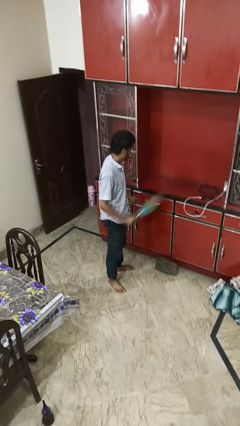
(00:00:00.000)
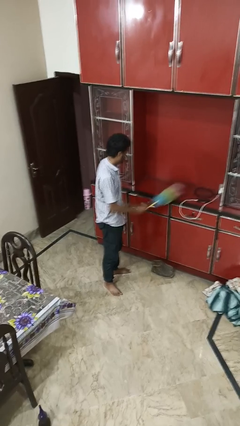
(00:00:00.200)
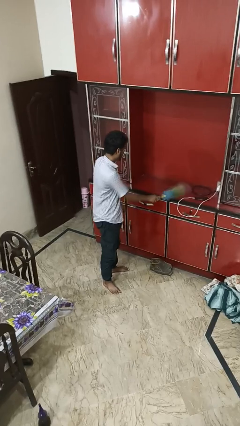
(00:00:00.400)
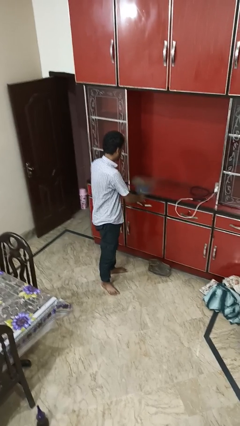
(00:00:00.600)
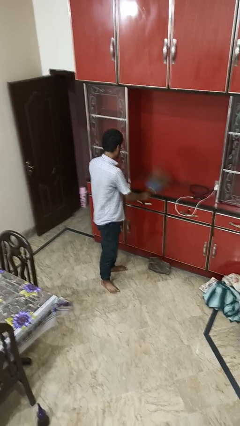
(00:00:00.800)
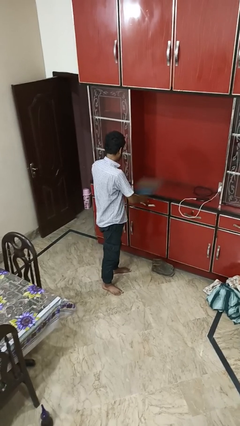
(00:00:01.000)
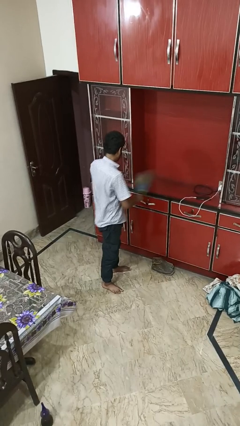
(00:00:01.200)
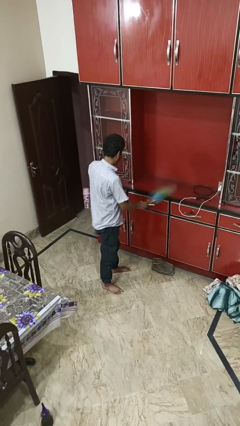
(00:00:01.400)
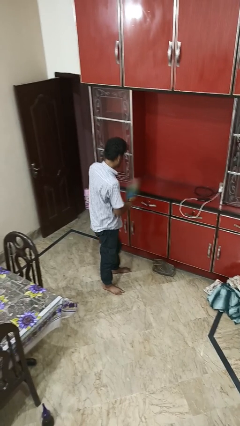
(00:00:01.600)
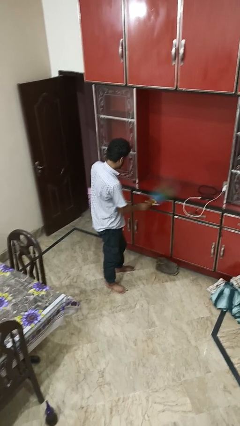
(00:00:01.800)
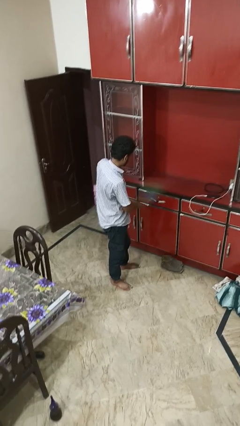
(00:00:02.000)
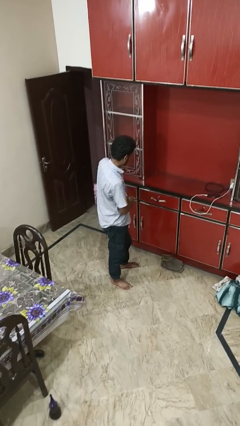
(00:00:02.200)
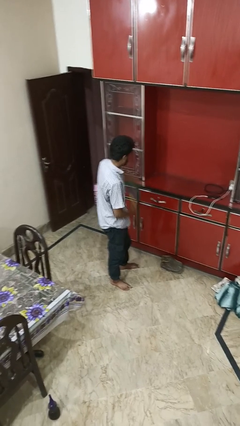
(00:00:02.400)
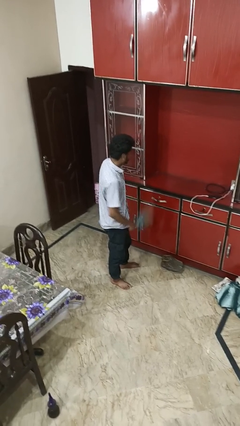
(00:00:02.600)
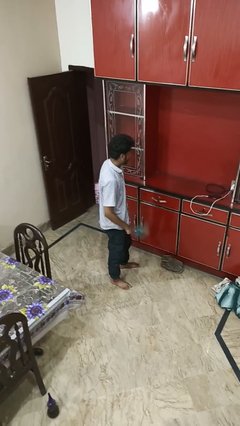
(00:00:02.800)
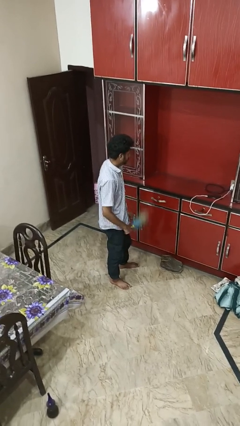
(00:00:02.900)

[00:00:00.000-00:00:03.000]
person dusts furniture

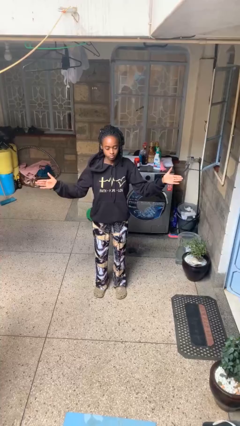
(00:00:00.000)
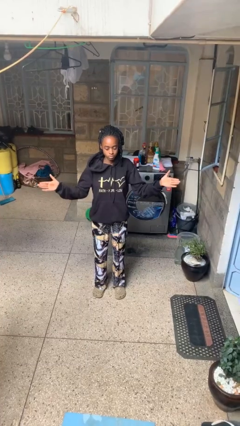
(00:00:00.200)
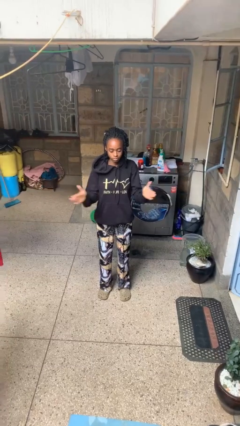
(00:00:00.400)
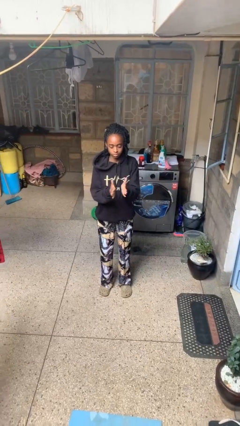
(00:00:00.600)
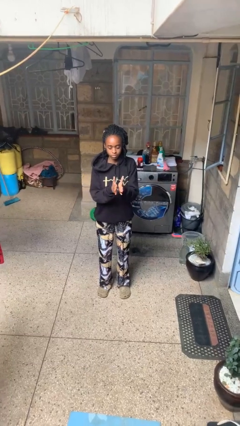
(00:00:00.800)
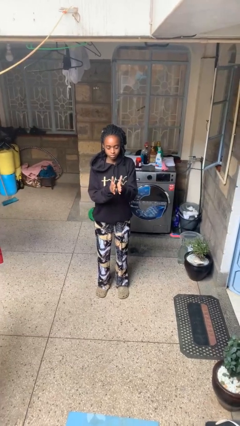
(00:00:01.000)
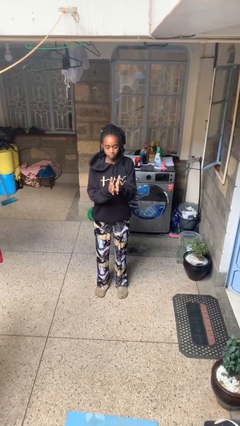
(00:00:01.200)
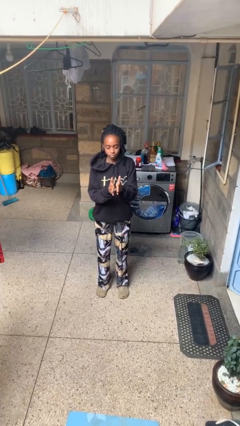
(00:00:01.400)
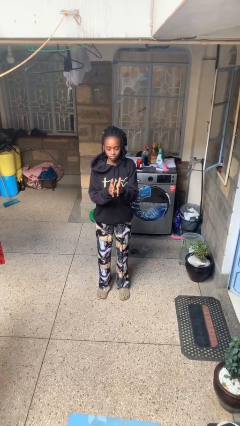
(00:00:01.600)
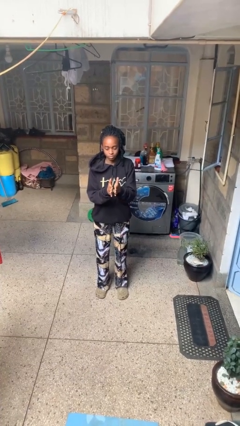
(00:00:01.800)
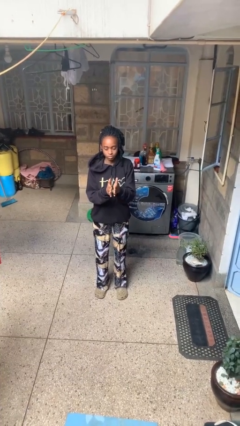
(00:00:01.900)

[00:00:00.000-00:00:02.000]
person gestures zoom out

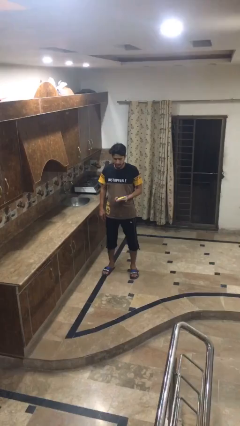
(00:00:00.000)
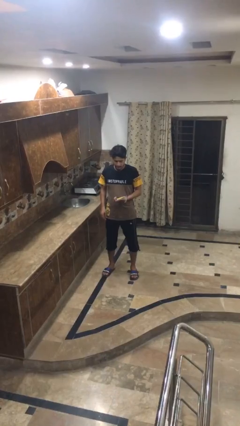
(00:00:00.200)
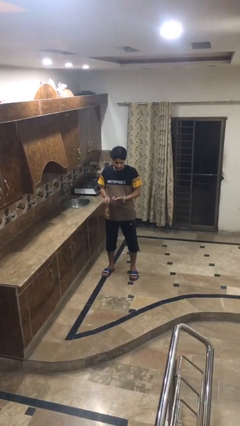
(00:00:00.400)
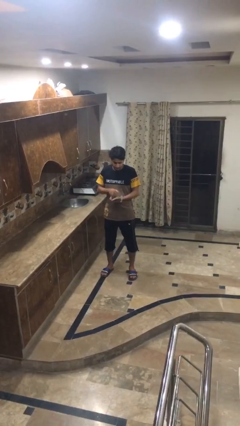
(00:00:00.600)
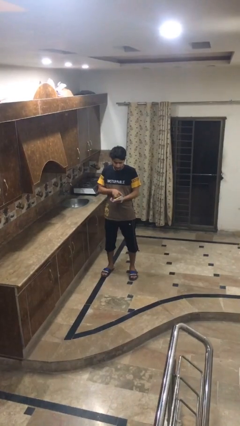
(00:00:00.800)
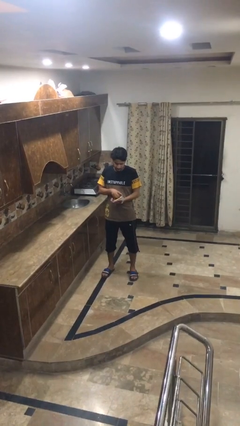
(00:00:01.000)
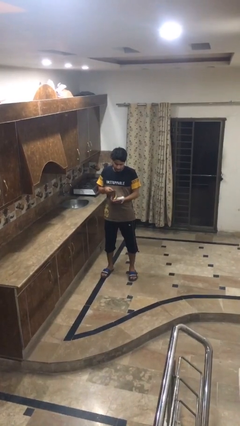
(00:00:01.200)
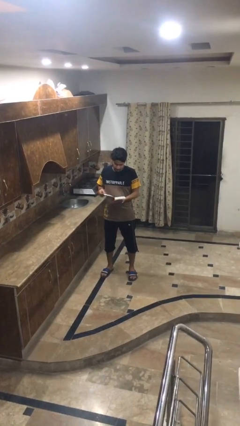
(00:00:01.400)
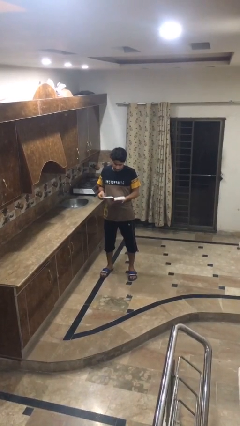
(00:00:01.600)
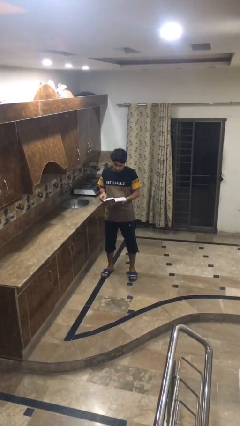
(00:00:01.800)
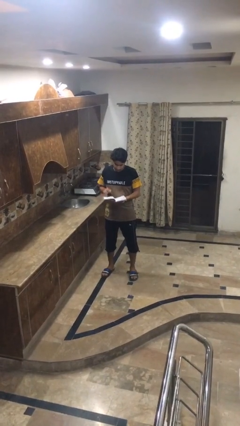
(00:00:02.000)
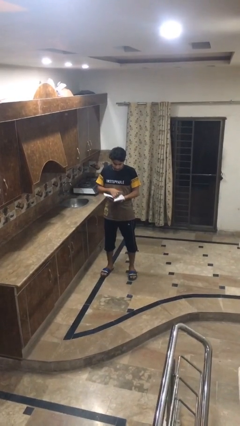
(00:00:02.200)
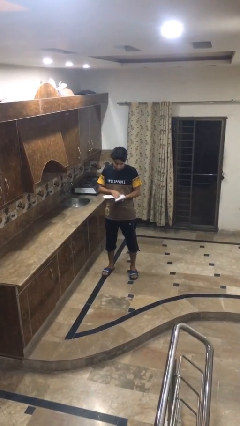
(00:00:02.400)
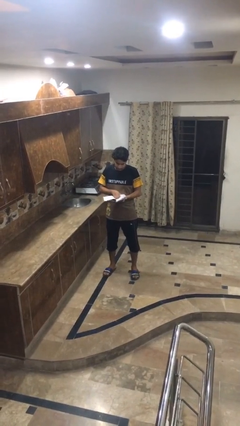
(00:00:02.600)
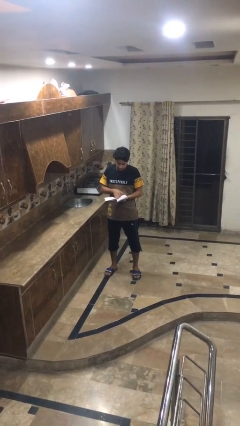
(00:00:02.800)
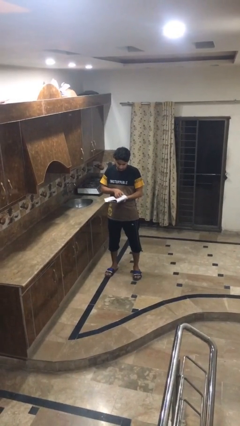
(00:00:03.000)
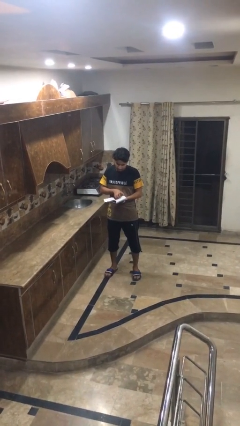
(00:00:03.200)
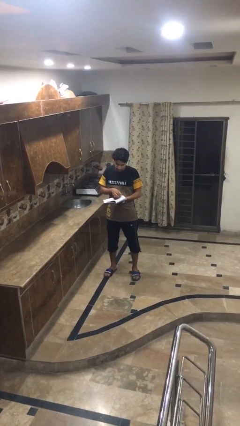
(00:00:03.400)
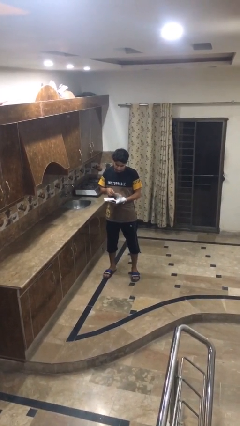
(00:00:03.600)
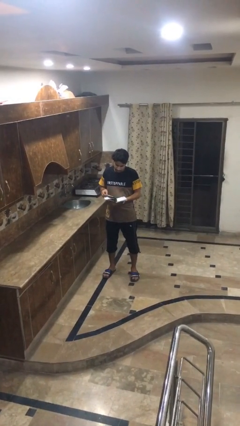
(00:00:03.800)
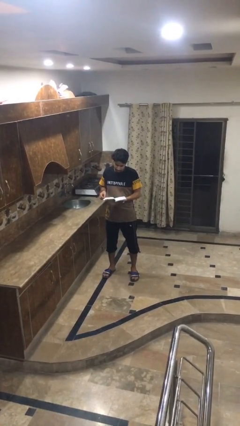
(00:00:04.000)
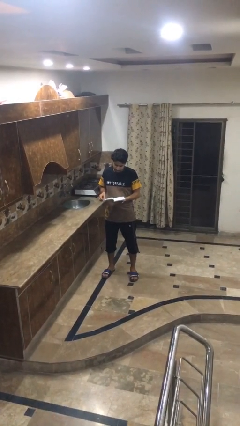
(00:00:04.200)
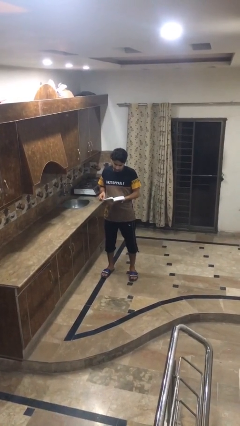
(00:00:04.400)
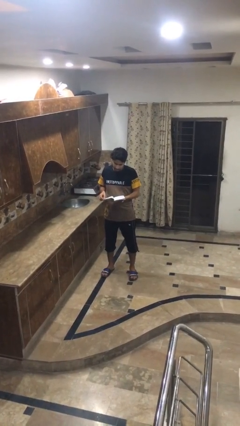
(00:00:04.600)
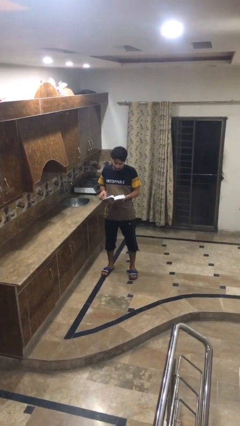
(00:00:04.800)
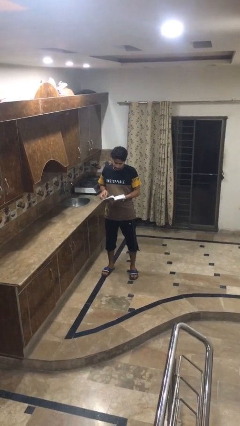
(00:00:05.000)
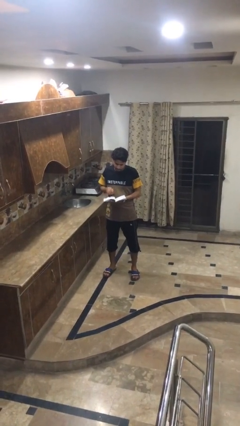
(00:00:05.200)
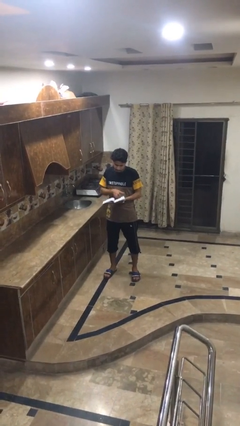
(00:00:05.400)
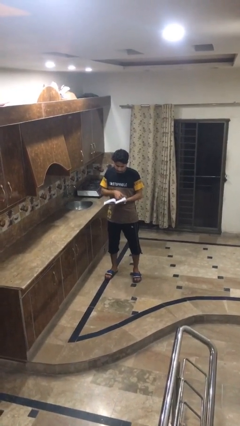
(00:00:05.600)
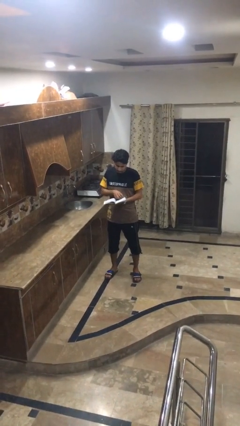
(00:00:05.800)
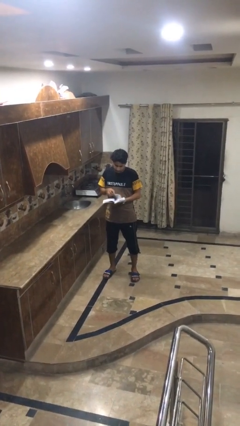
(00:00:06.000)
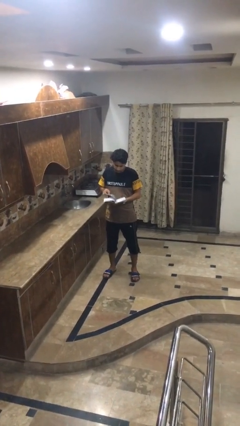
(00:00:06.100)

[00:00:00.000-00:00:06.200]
person reads book

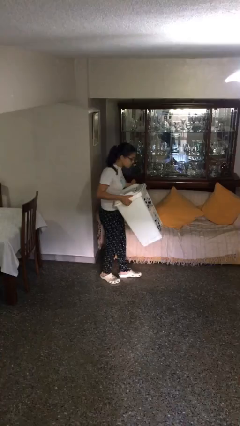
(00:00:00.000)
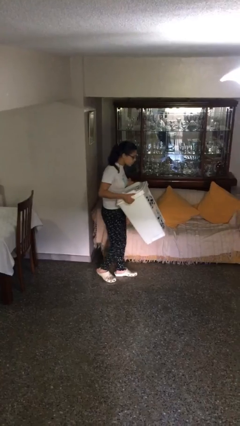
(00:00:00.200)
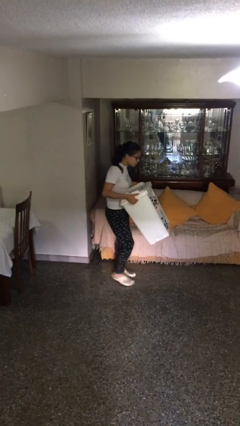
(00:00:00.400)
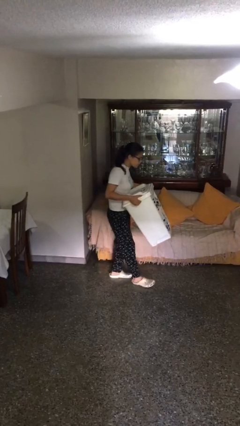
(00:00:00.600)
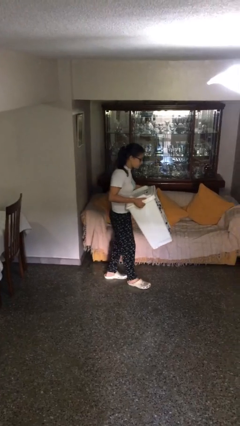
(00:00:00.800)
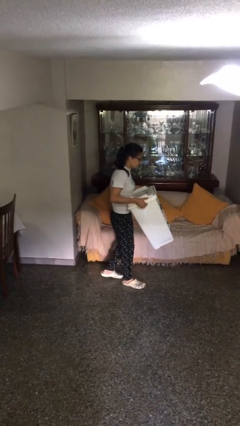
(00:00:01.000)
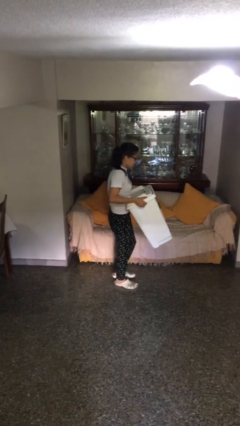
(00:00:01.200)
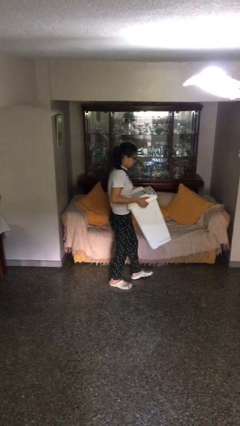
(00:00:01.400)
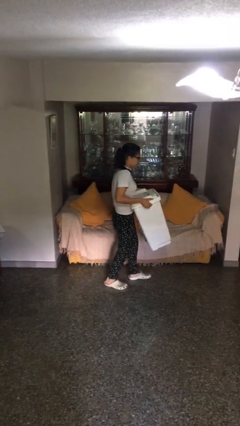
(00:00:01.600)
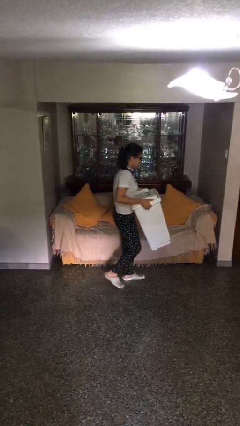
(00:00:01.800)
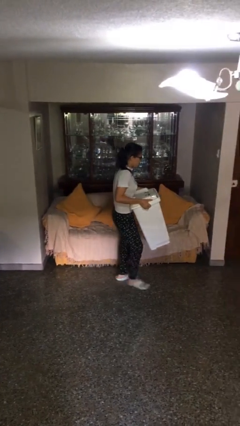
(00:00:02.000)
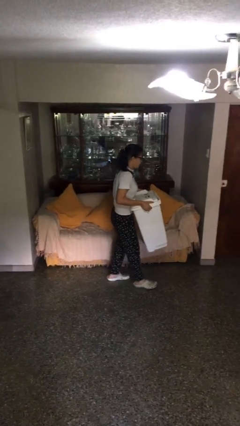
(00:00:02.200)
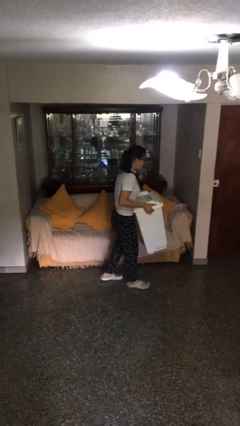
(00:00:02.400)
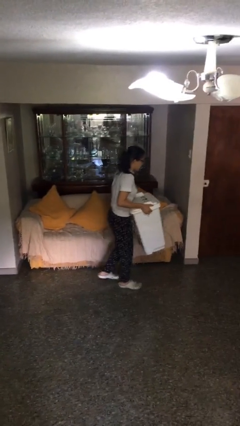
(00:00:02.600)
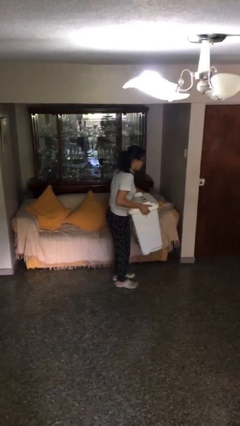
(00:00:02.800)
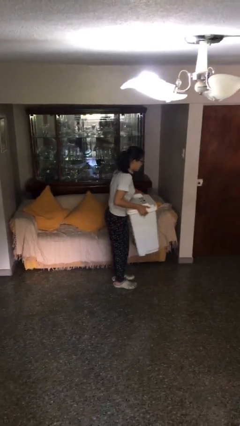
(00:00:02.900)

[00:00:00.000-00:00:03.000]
person carries heavy object

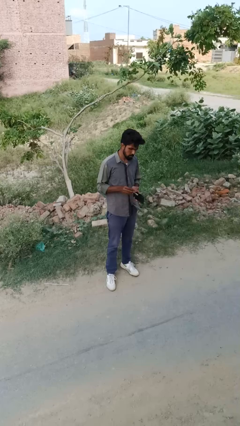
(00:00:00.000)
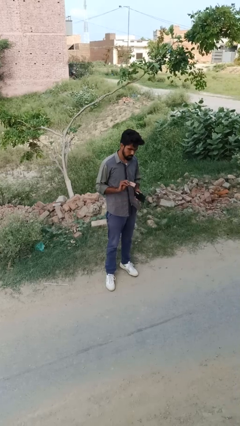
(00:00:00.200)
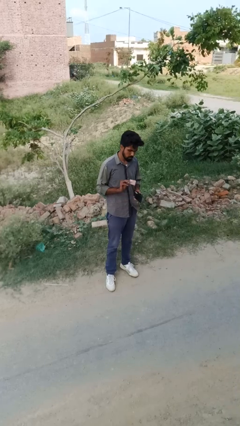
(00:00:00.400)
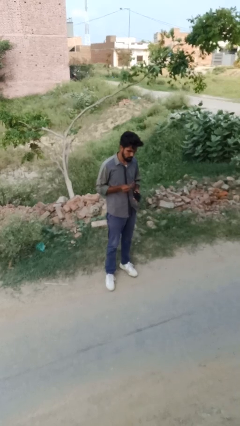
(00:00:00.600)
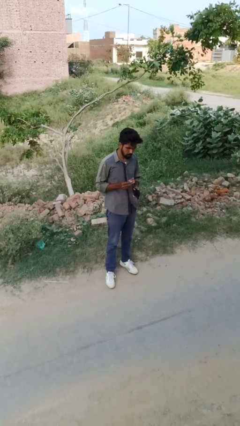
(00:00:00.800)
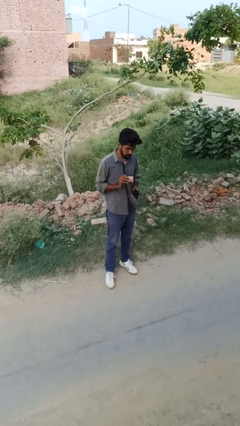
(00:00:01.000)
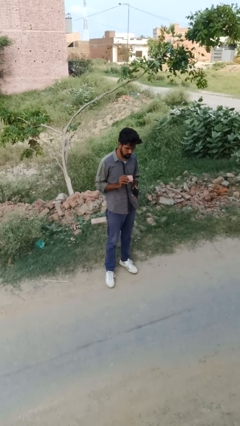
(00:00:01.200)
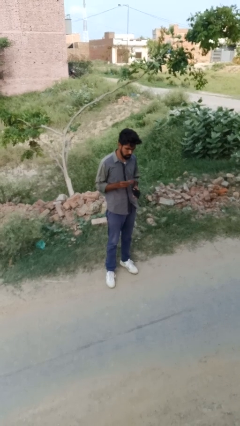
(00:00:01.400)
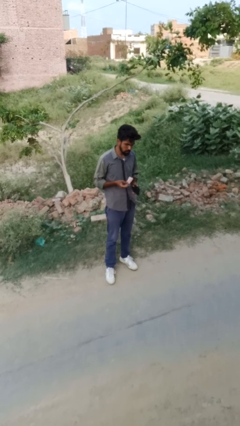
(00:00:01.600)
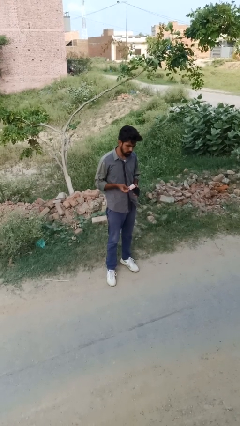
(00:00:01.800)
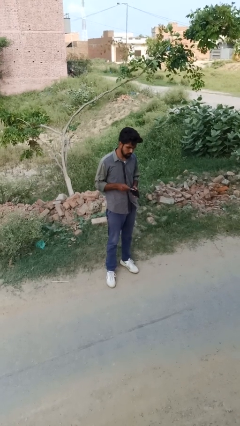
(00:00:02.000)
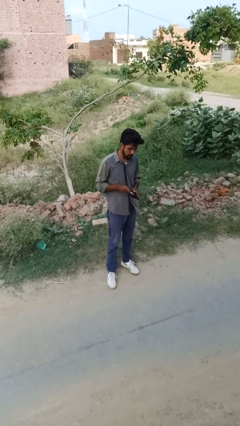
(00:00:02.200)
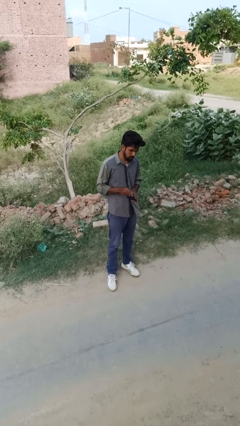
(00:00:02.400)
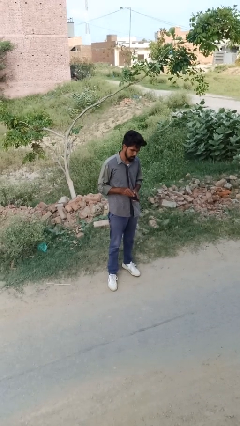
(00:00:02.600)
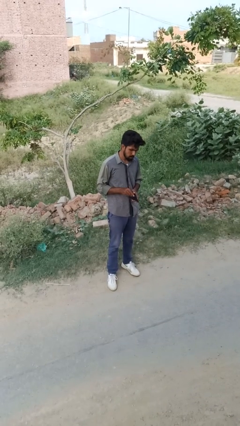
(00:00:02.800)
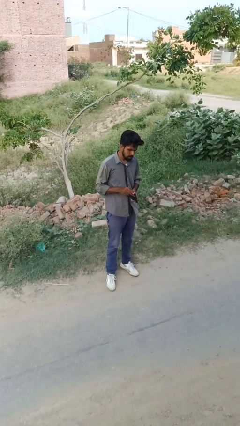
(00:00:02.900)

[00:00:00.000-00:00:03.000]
person takes object from purse
